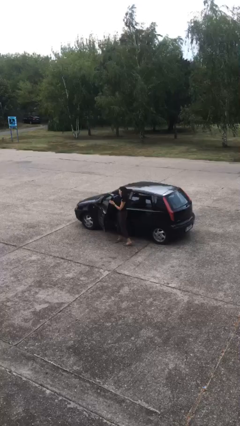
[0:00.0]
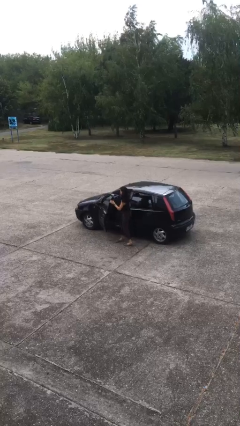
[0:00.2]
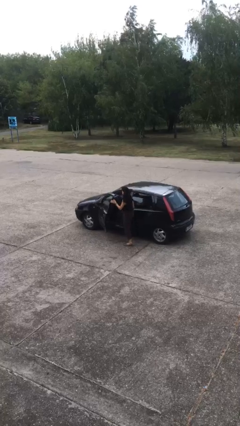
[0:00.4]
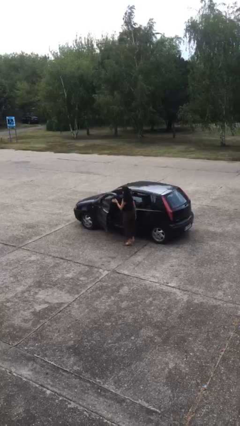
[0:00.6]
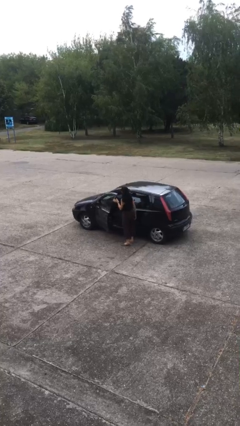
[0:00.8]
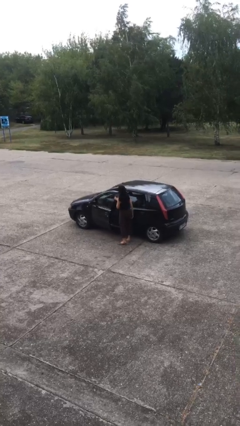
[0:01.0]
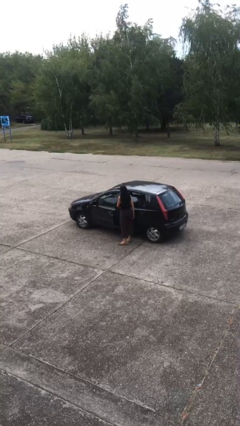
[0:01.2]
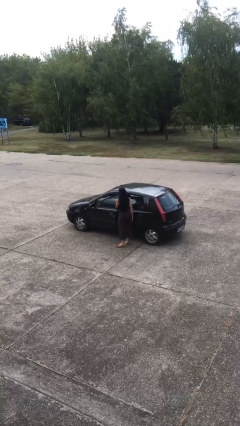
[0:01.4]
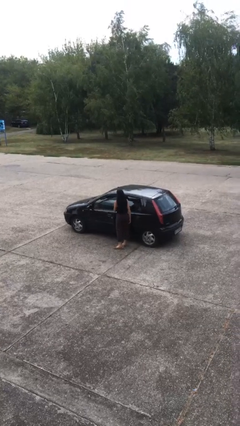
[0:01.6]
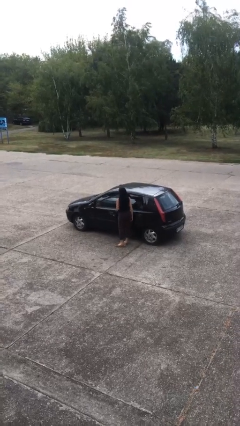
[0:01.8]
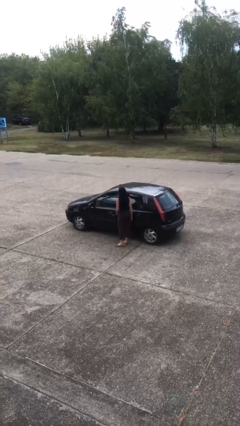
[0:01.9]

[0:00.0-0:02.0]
person closes car door

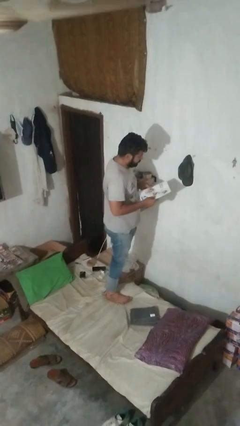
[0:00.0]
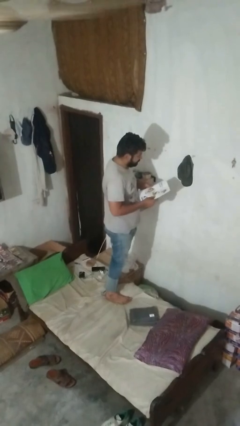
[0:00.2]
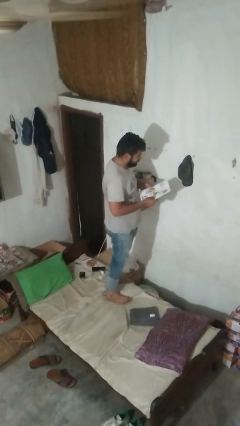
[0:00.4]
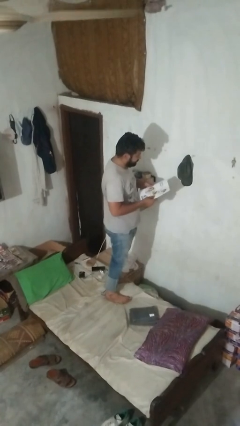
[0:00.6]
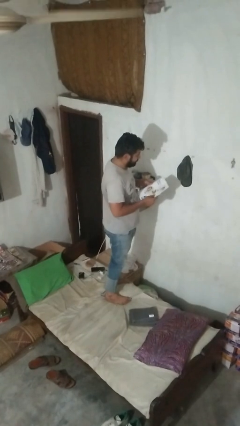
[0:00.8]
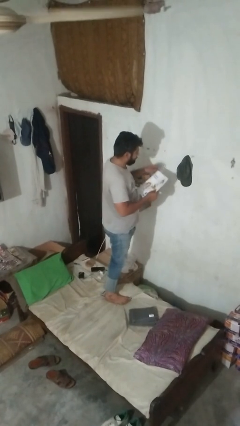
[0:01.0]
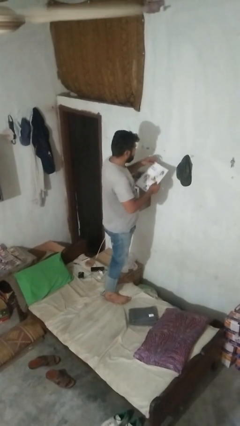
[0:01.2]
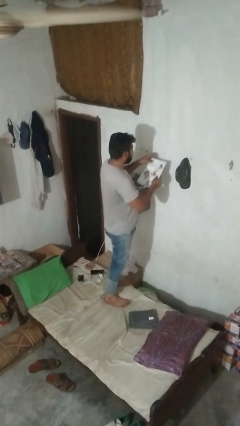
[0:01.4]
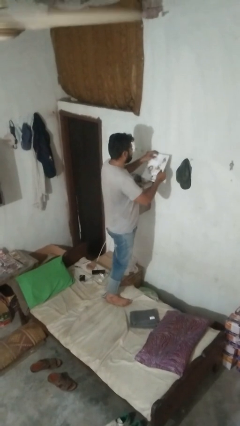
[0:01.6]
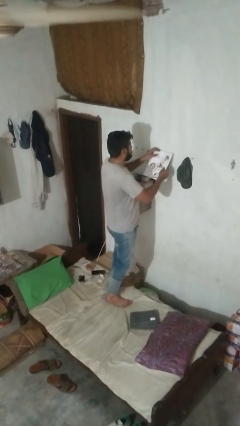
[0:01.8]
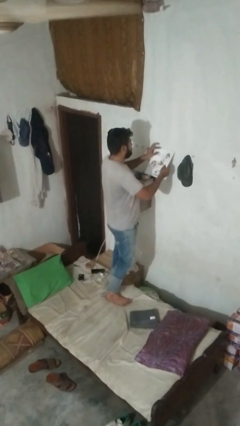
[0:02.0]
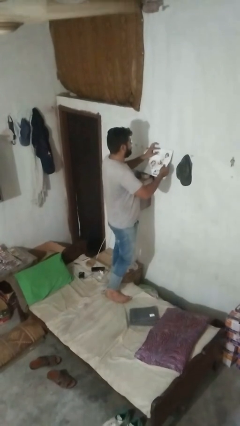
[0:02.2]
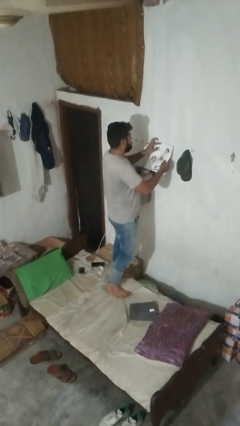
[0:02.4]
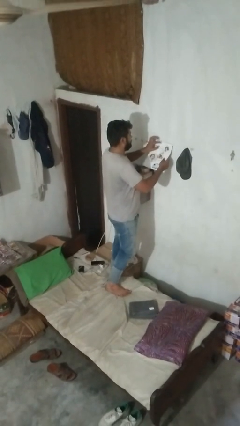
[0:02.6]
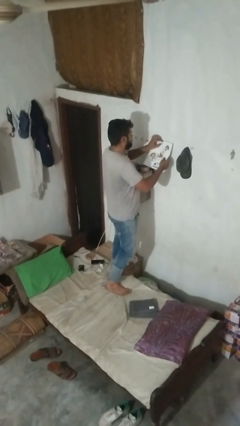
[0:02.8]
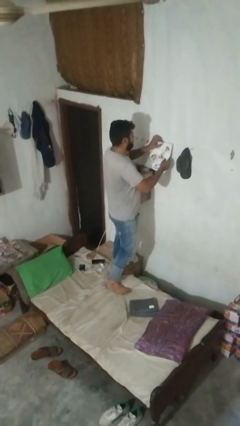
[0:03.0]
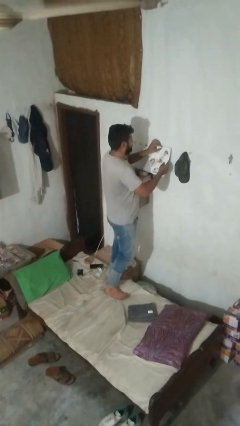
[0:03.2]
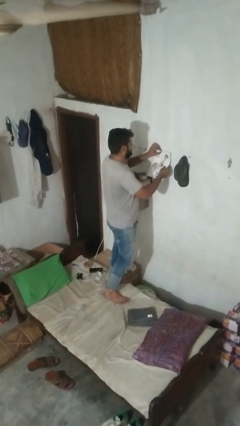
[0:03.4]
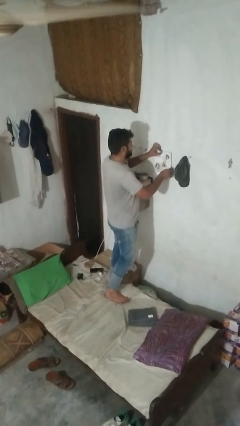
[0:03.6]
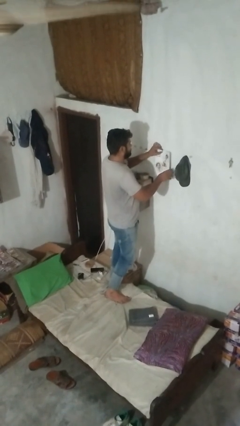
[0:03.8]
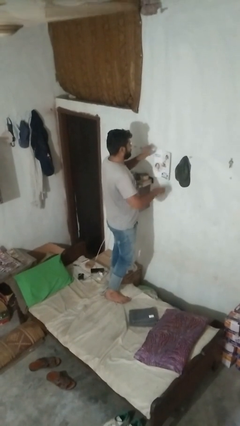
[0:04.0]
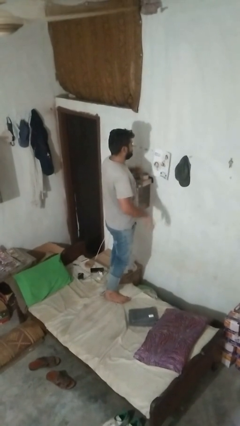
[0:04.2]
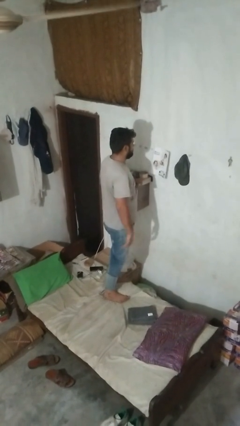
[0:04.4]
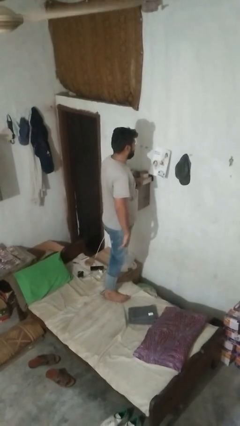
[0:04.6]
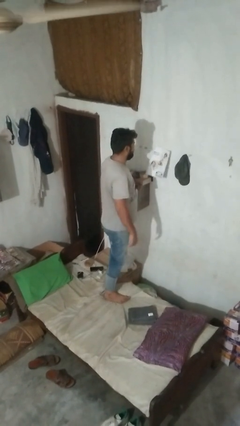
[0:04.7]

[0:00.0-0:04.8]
person puts up picture frame

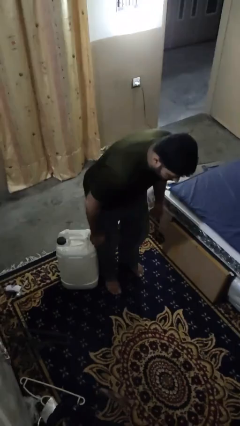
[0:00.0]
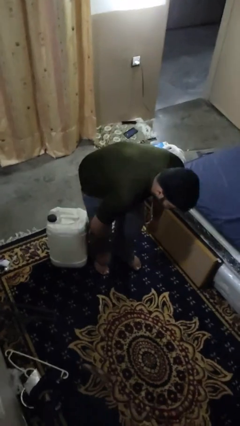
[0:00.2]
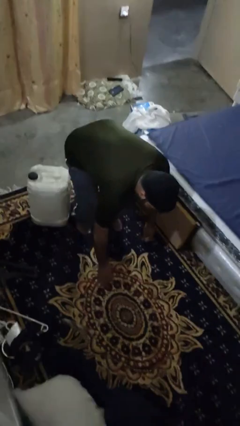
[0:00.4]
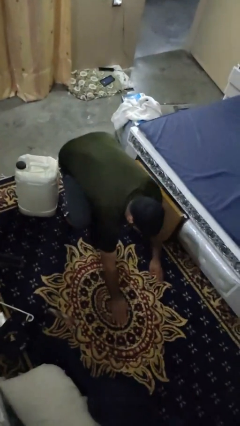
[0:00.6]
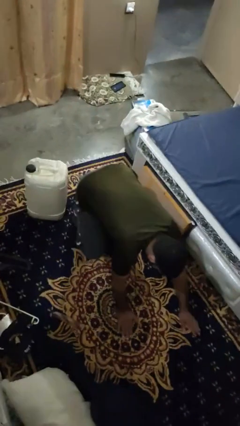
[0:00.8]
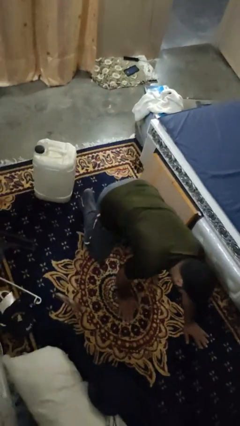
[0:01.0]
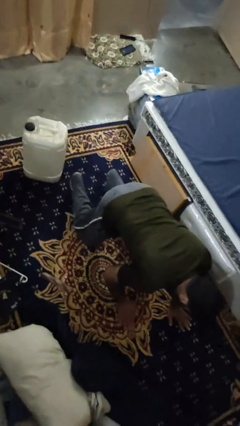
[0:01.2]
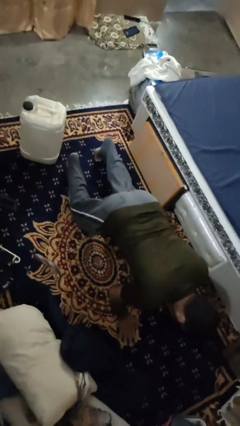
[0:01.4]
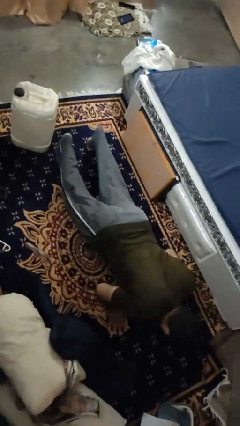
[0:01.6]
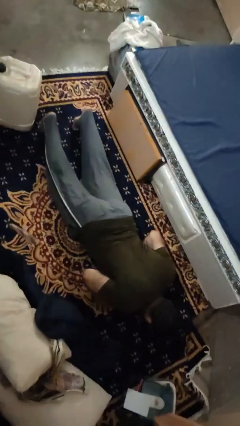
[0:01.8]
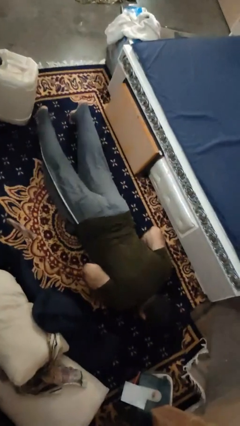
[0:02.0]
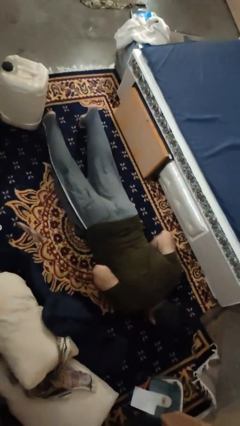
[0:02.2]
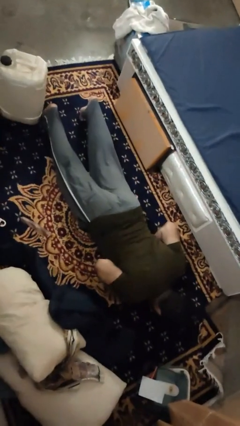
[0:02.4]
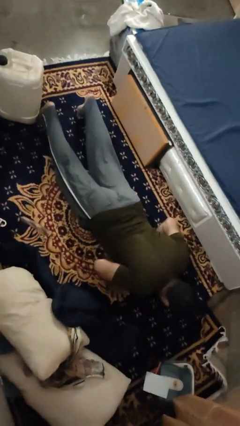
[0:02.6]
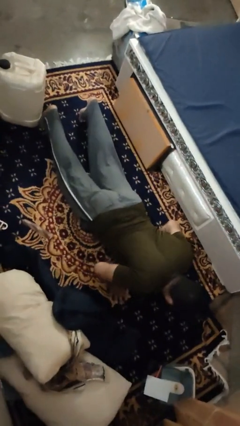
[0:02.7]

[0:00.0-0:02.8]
person lies down on floor

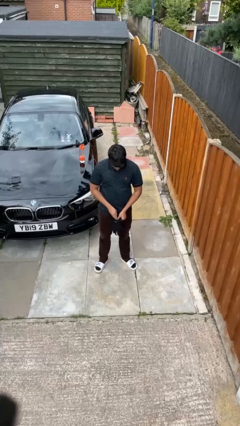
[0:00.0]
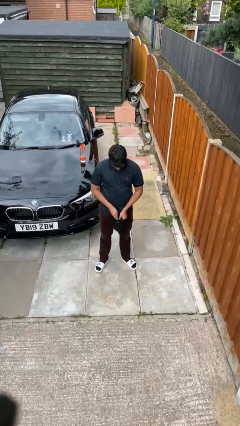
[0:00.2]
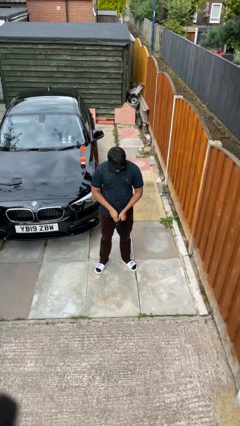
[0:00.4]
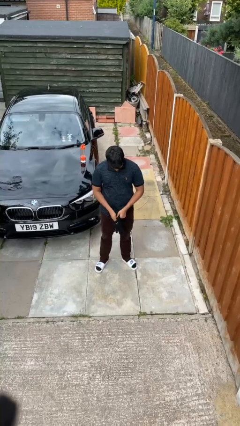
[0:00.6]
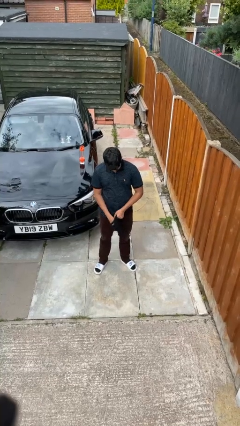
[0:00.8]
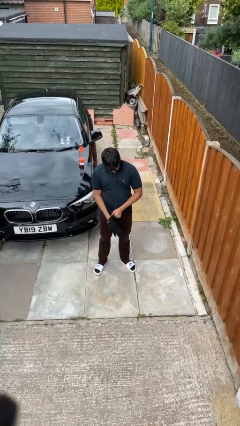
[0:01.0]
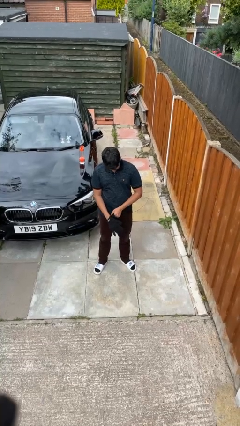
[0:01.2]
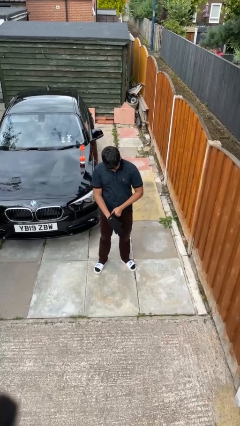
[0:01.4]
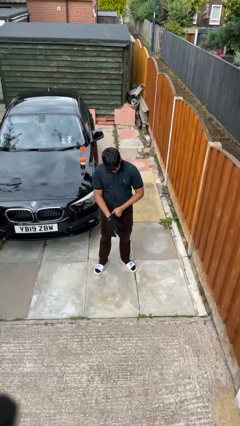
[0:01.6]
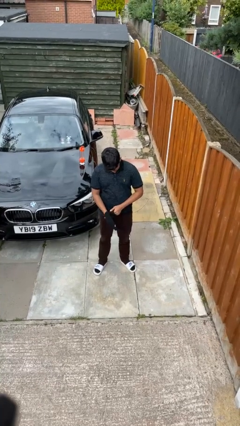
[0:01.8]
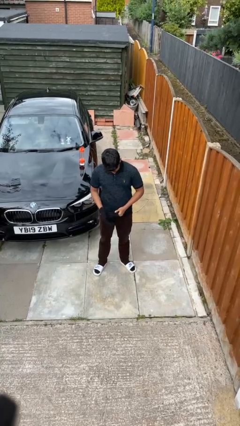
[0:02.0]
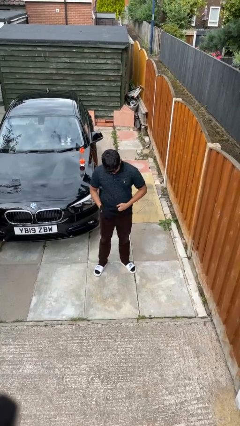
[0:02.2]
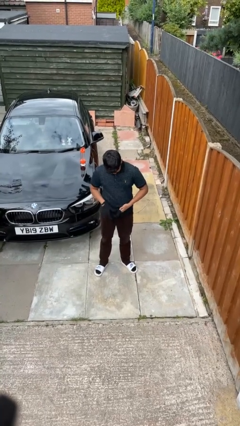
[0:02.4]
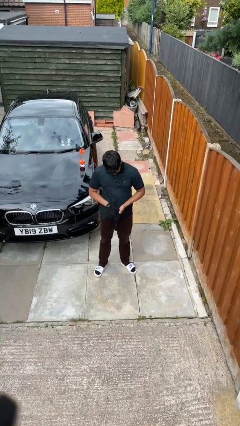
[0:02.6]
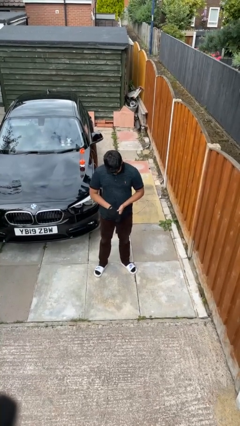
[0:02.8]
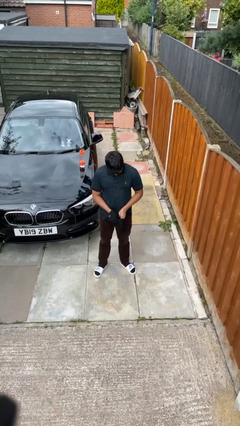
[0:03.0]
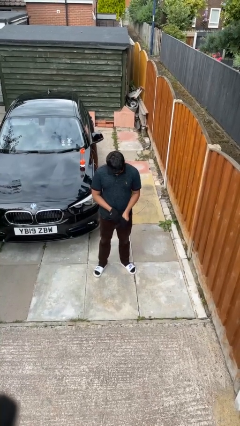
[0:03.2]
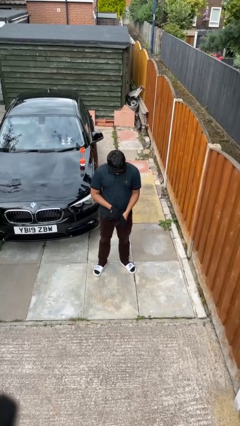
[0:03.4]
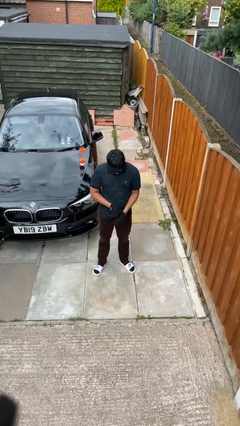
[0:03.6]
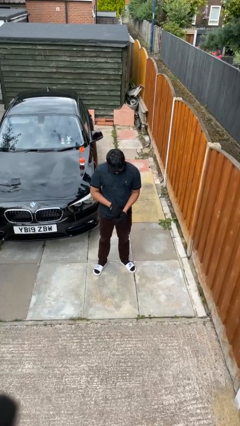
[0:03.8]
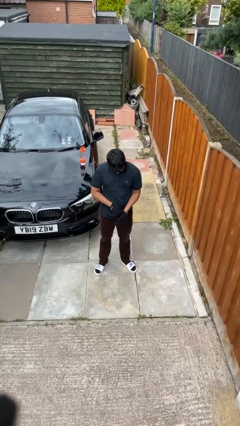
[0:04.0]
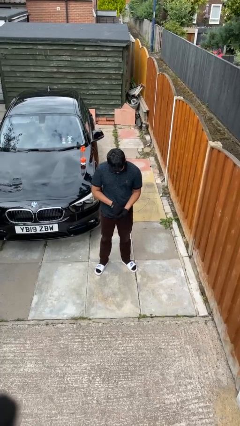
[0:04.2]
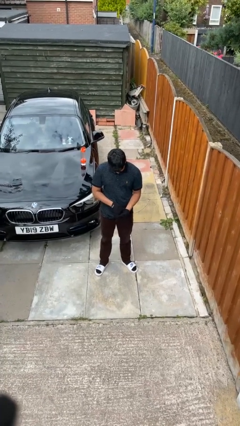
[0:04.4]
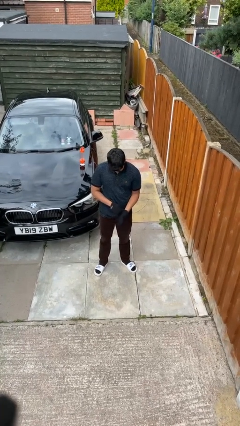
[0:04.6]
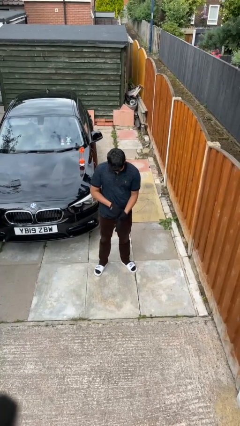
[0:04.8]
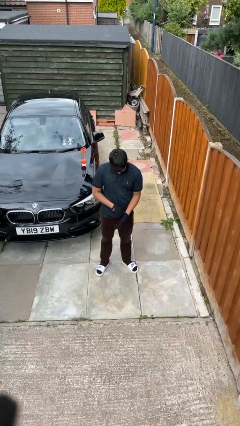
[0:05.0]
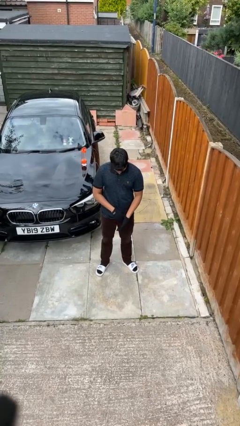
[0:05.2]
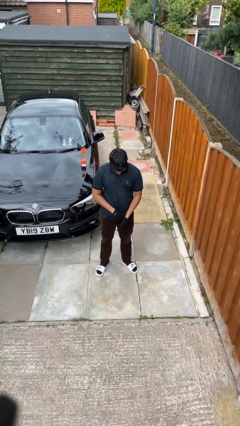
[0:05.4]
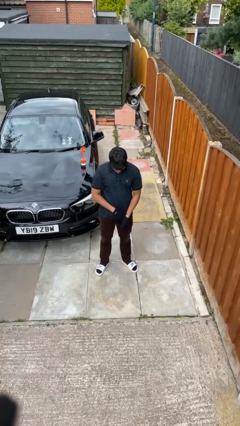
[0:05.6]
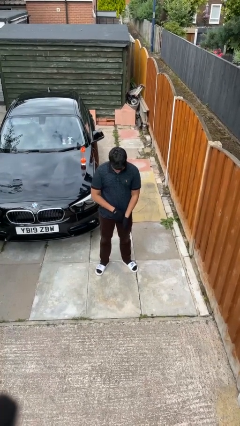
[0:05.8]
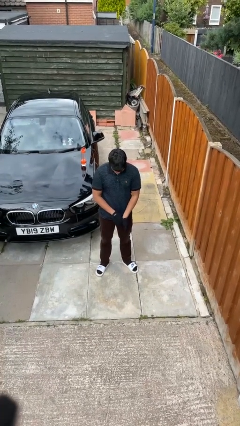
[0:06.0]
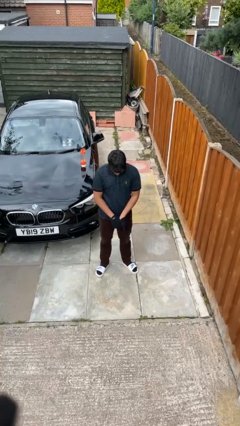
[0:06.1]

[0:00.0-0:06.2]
person puts on gloves

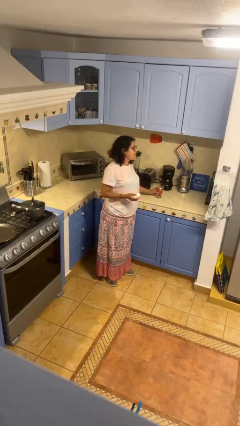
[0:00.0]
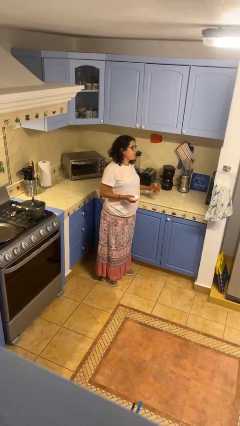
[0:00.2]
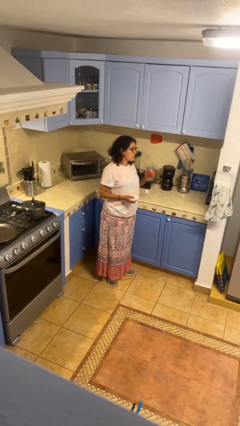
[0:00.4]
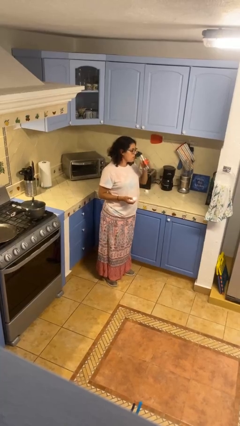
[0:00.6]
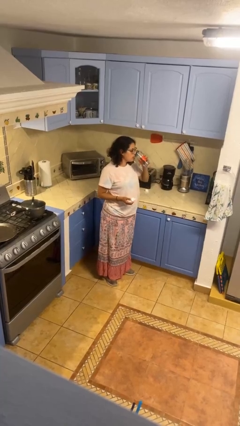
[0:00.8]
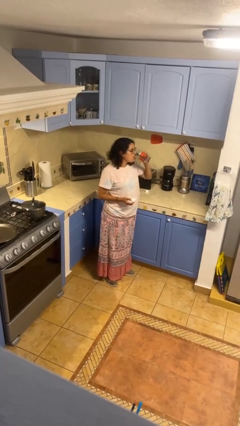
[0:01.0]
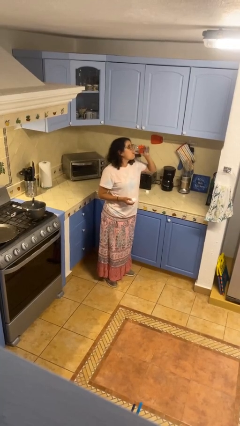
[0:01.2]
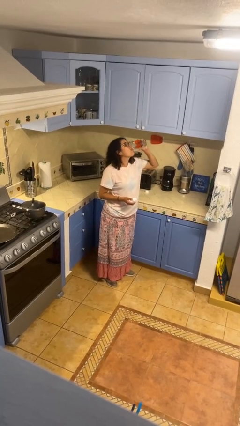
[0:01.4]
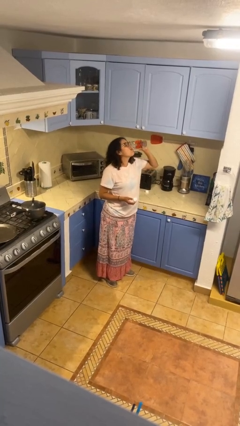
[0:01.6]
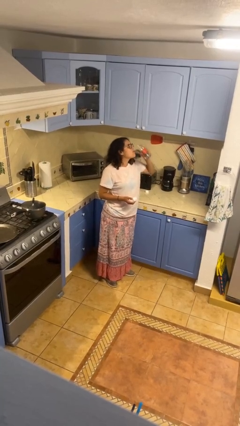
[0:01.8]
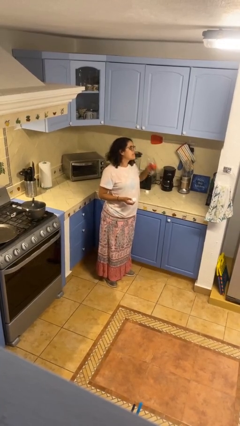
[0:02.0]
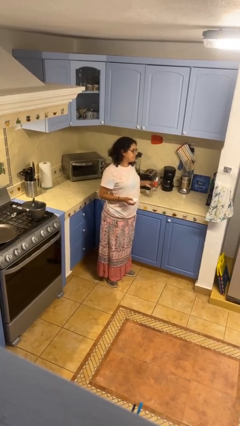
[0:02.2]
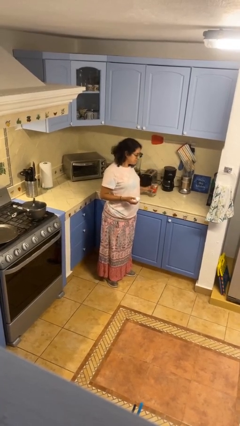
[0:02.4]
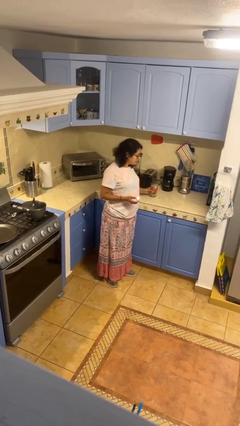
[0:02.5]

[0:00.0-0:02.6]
person drinks from cup
